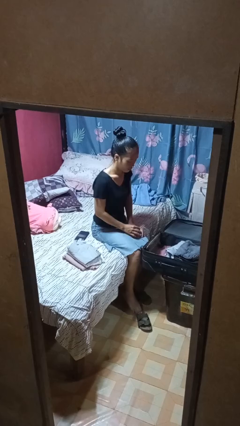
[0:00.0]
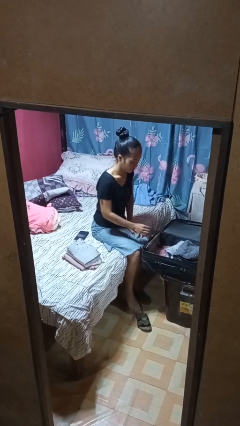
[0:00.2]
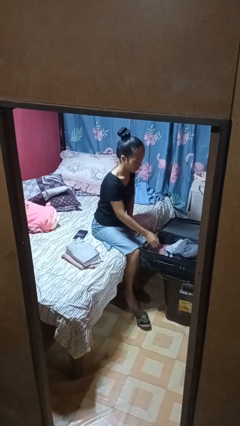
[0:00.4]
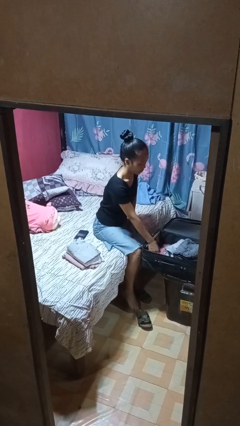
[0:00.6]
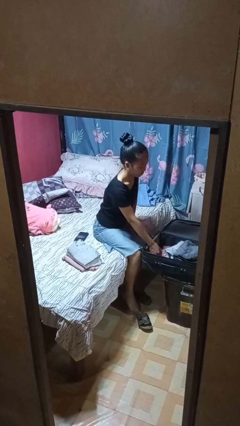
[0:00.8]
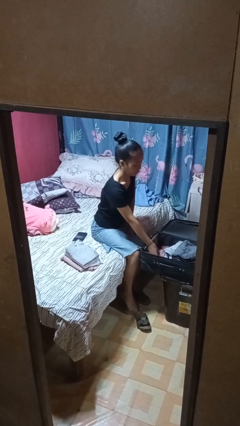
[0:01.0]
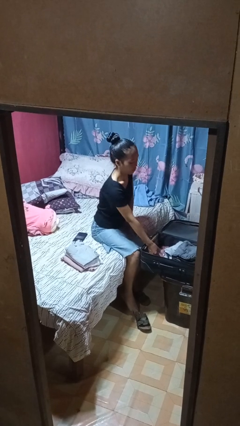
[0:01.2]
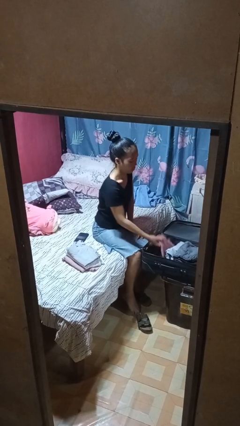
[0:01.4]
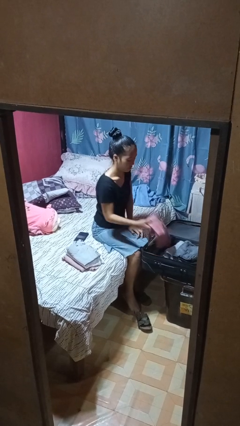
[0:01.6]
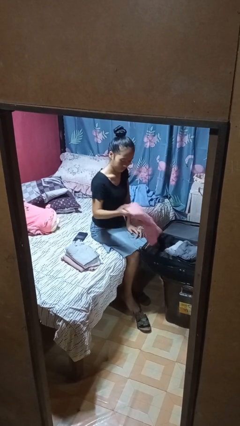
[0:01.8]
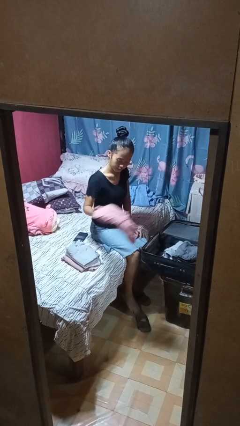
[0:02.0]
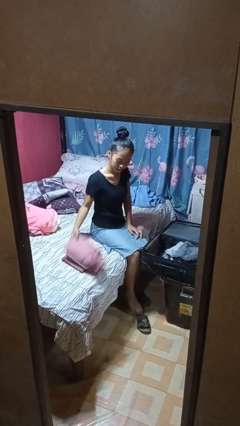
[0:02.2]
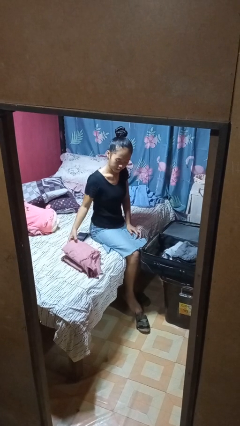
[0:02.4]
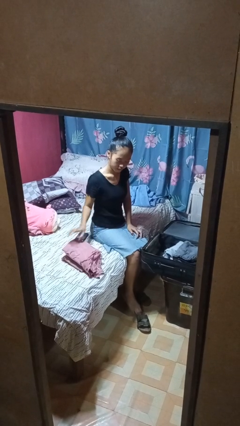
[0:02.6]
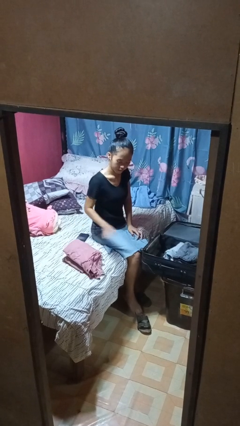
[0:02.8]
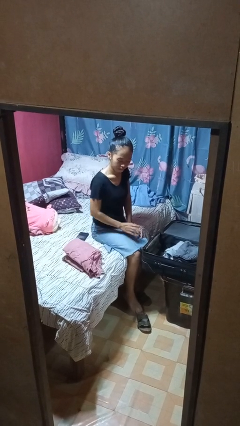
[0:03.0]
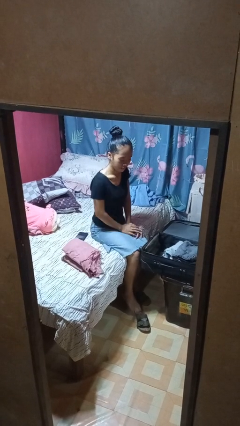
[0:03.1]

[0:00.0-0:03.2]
person unloads clothes from suitcase

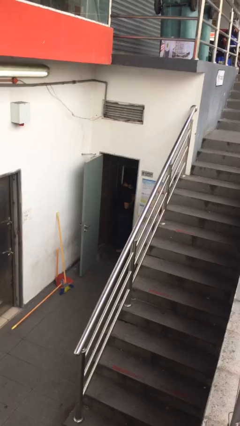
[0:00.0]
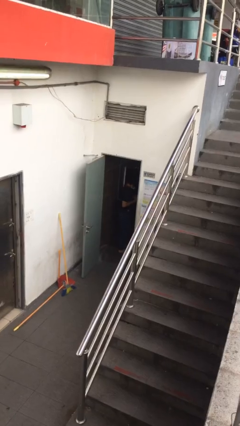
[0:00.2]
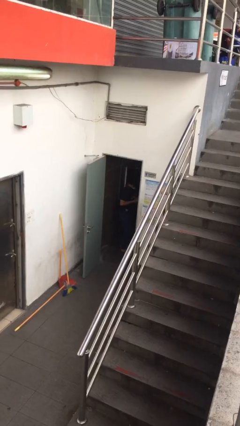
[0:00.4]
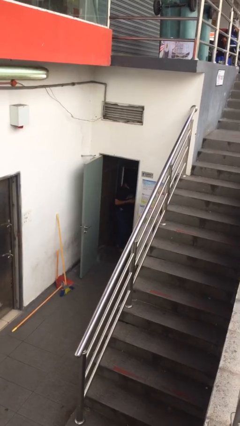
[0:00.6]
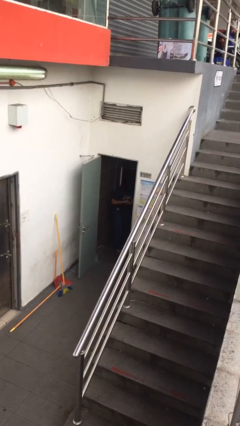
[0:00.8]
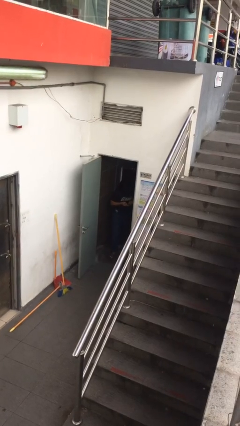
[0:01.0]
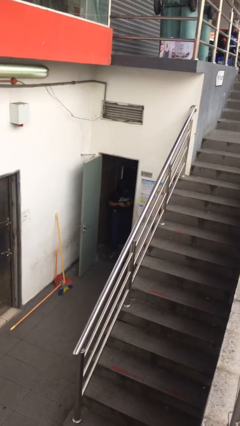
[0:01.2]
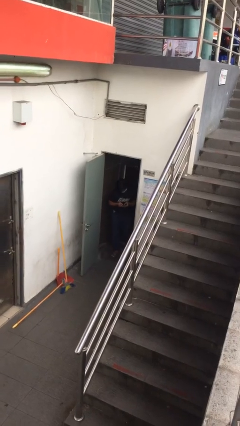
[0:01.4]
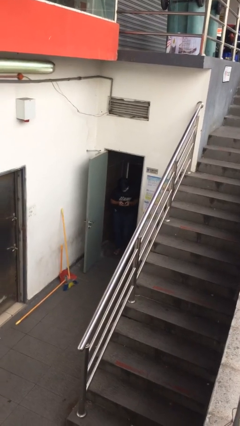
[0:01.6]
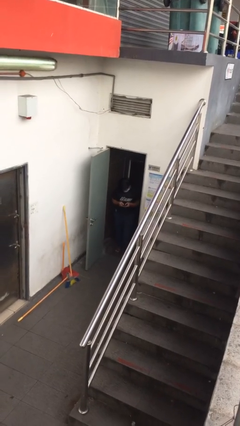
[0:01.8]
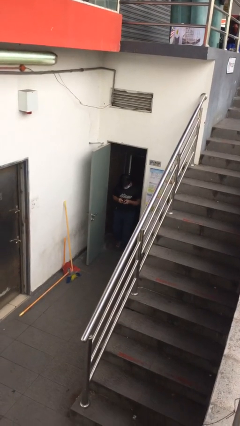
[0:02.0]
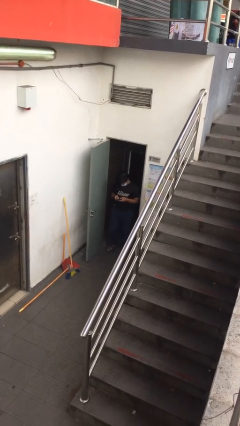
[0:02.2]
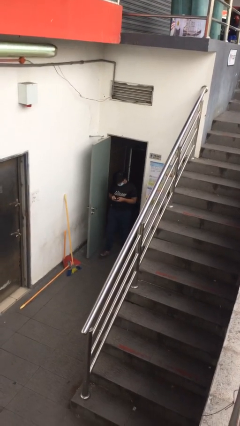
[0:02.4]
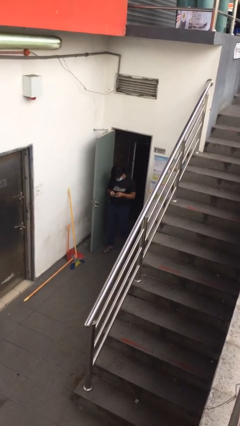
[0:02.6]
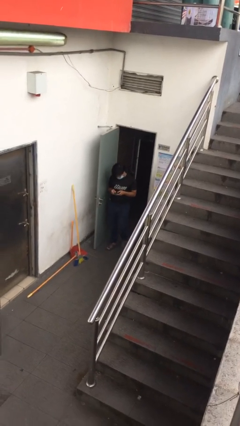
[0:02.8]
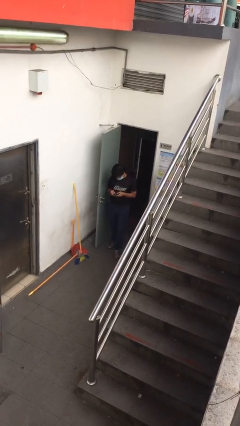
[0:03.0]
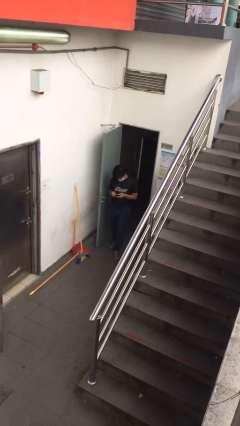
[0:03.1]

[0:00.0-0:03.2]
person enters scene through structure

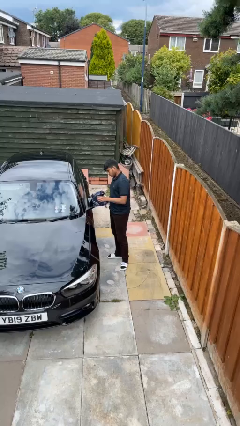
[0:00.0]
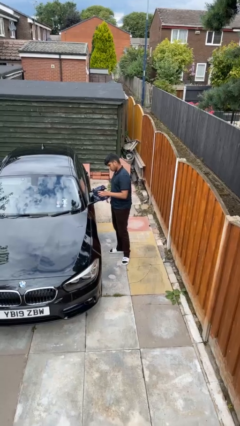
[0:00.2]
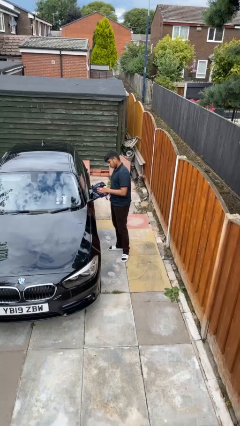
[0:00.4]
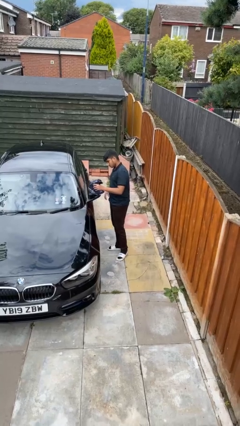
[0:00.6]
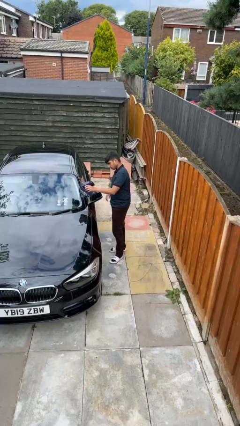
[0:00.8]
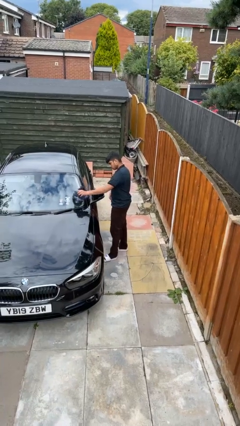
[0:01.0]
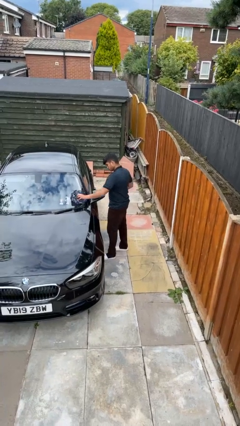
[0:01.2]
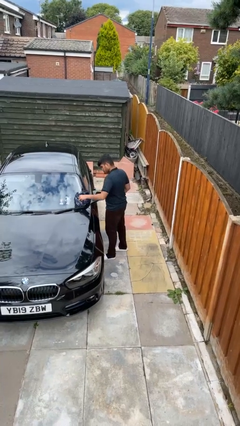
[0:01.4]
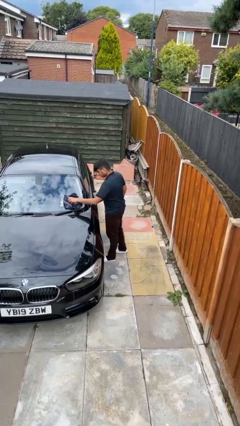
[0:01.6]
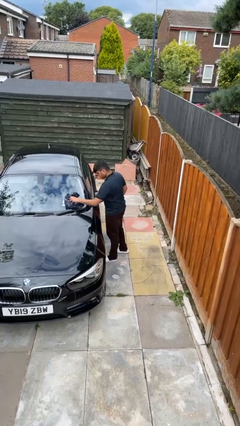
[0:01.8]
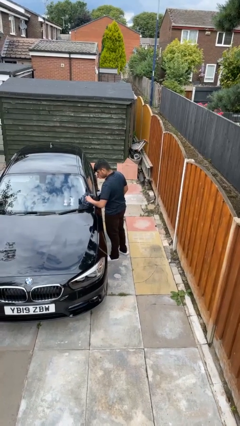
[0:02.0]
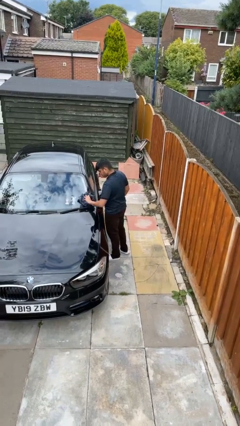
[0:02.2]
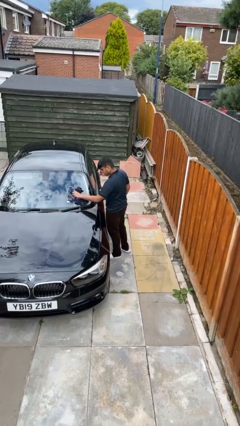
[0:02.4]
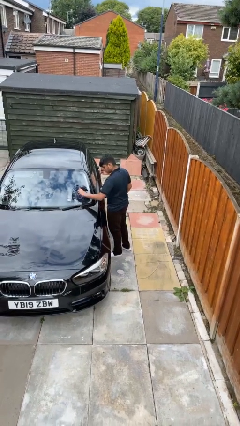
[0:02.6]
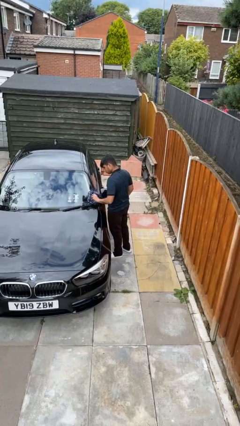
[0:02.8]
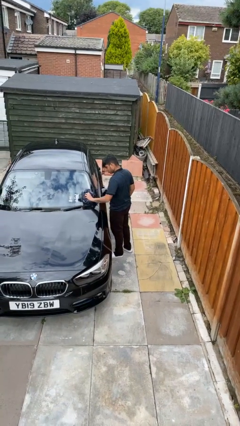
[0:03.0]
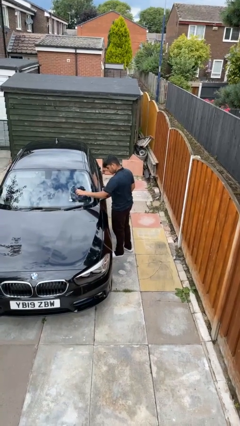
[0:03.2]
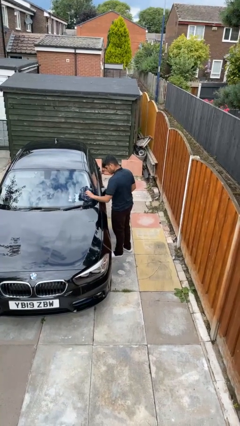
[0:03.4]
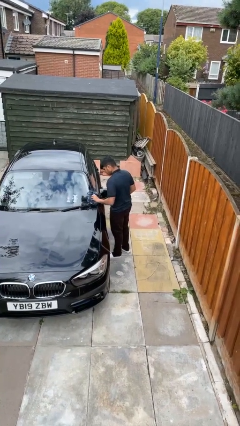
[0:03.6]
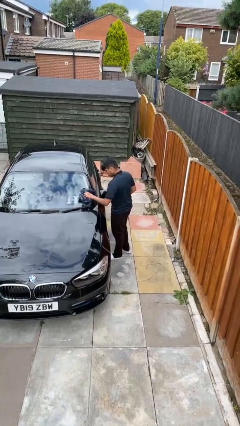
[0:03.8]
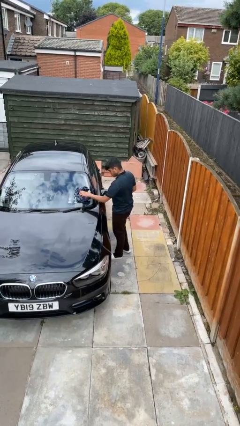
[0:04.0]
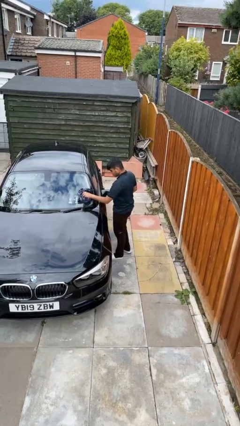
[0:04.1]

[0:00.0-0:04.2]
person polishes car with rag

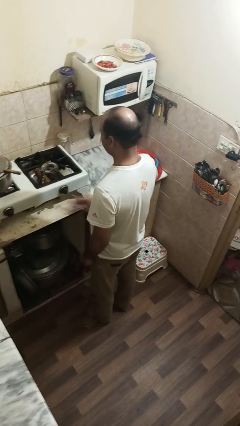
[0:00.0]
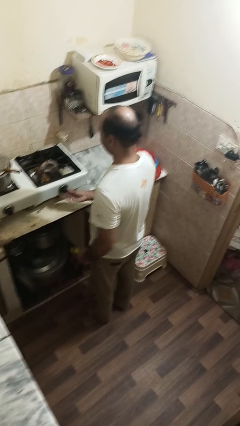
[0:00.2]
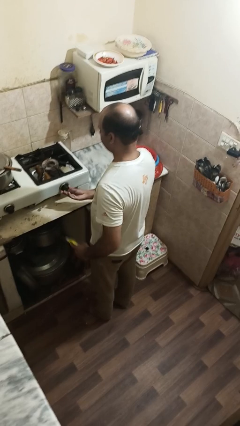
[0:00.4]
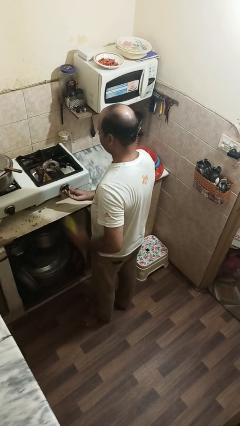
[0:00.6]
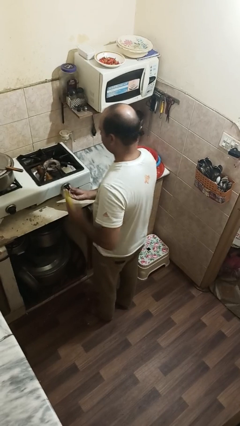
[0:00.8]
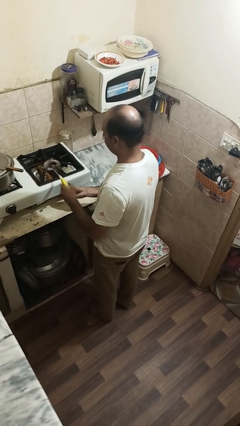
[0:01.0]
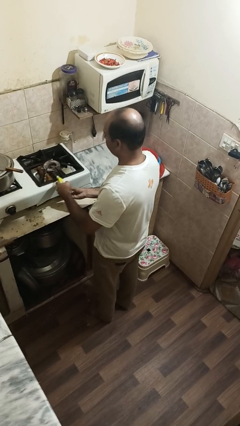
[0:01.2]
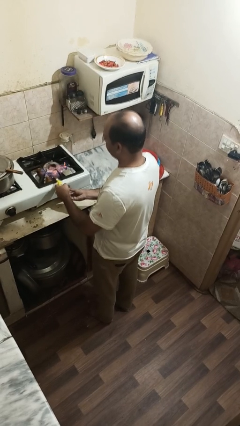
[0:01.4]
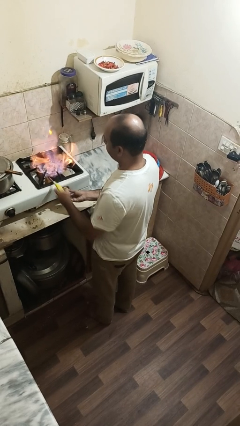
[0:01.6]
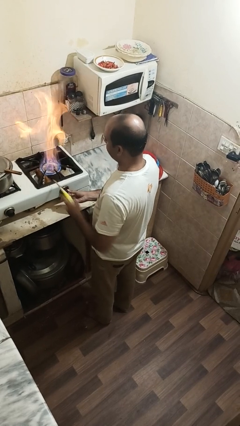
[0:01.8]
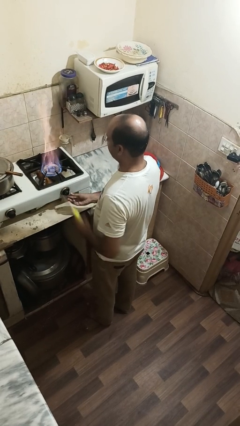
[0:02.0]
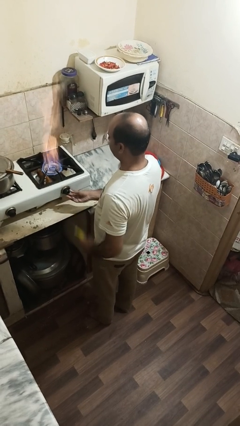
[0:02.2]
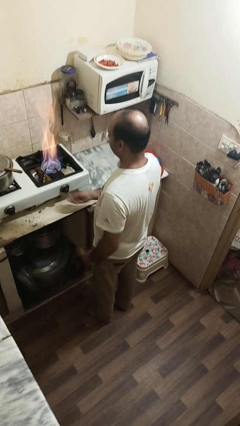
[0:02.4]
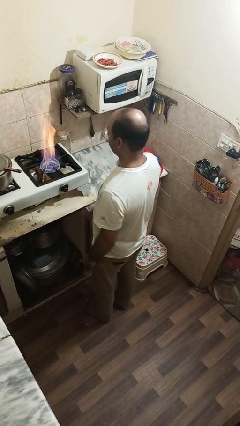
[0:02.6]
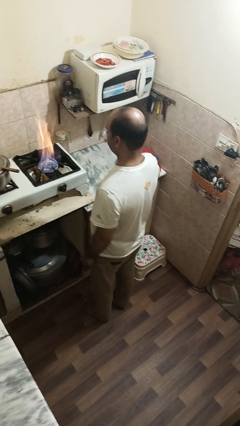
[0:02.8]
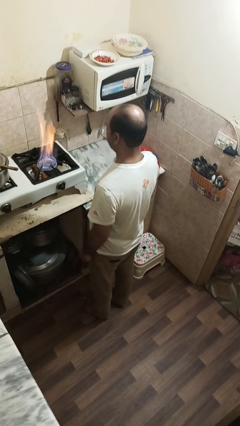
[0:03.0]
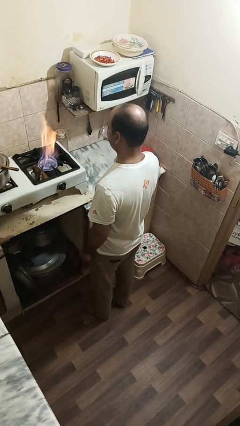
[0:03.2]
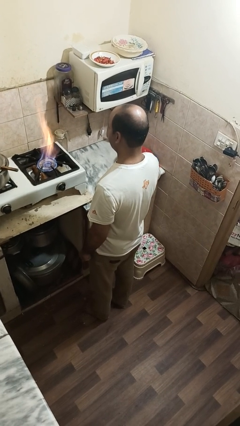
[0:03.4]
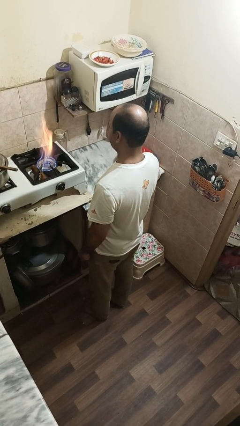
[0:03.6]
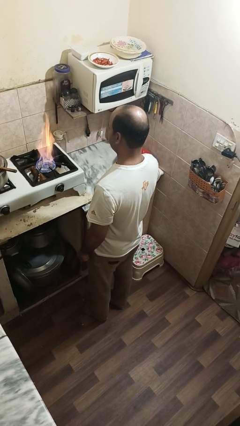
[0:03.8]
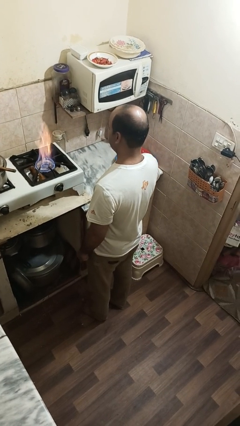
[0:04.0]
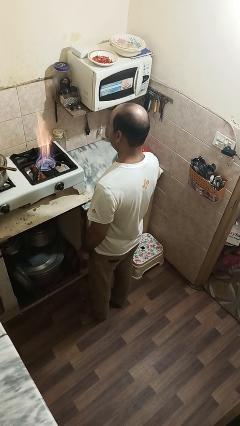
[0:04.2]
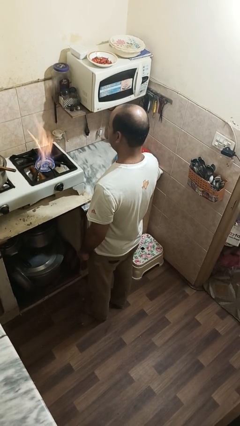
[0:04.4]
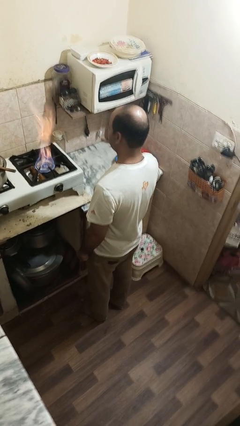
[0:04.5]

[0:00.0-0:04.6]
person turns on stovetop

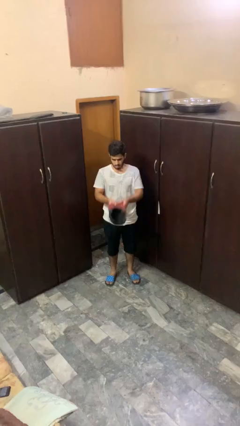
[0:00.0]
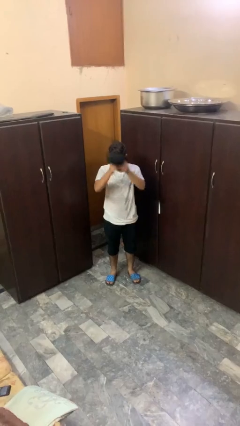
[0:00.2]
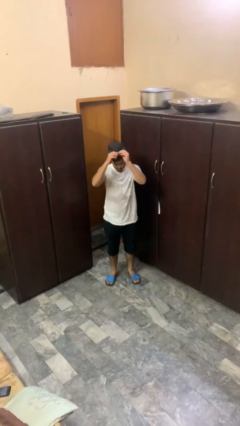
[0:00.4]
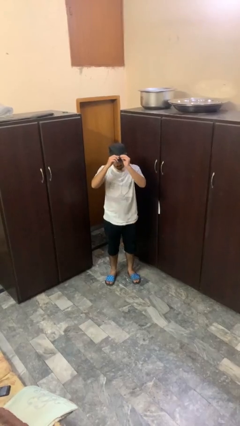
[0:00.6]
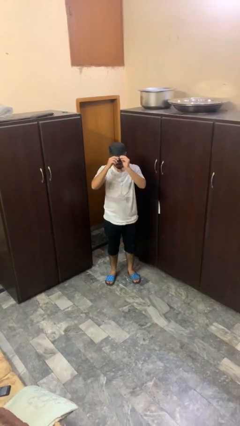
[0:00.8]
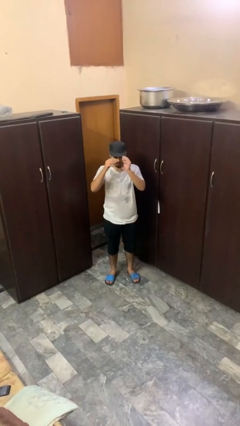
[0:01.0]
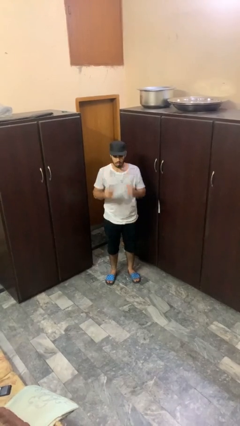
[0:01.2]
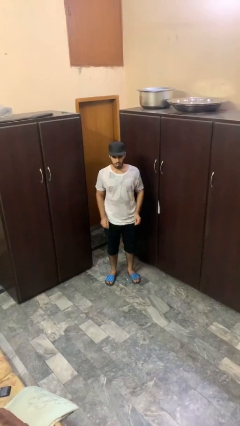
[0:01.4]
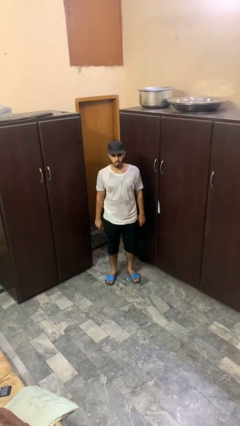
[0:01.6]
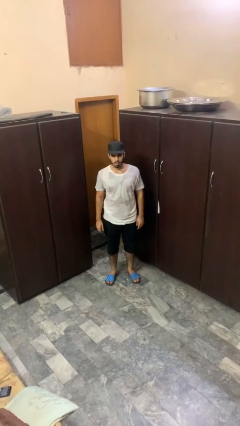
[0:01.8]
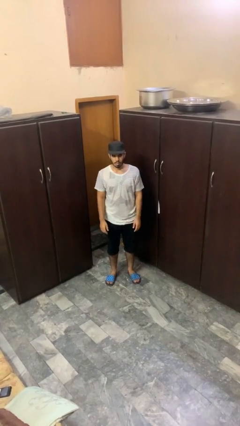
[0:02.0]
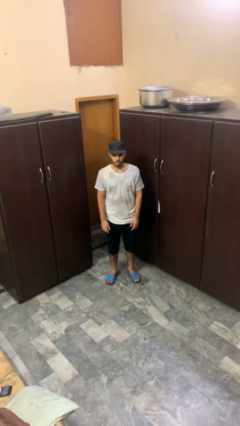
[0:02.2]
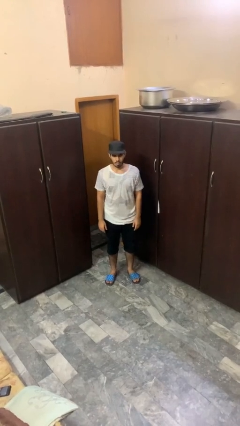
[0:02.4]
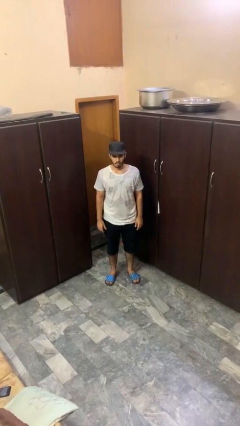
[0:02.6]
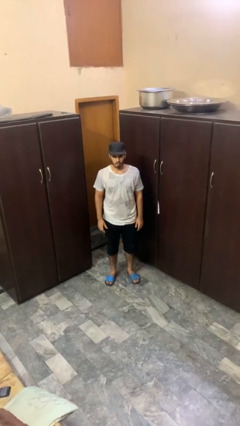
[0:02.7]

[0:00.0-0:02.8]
person puts on hat
